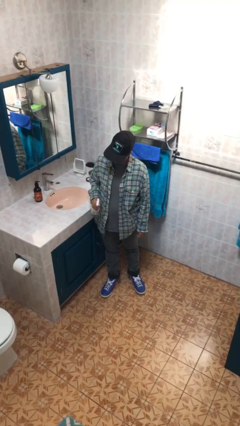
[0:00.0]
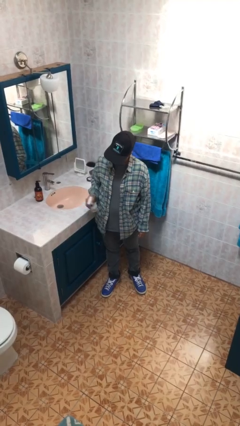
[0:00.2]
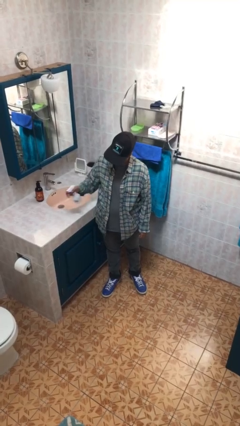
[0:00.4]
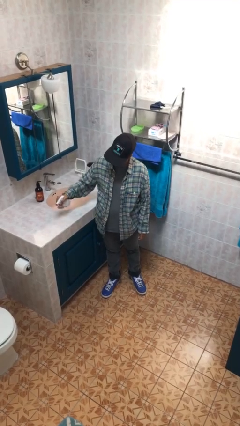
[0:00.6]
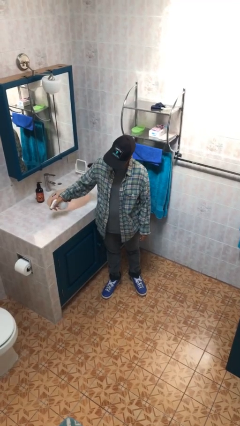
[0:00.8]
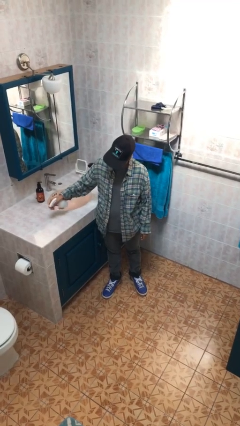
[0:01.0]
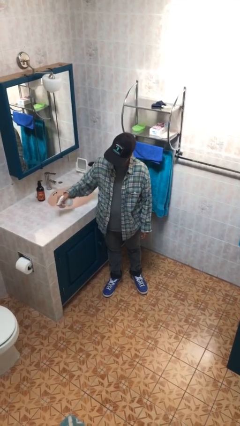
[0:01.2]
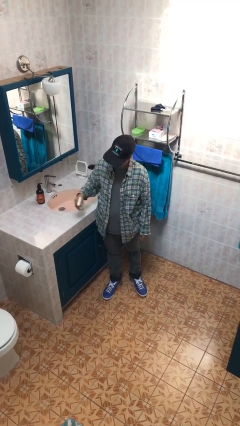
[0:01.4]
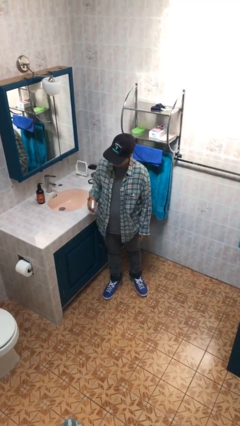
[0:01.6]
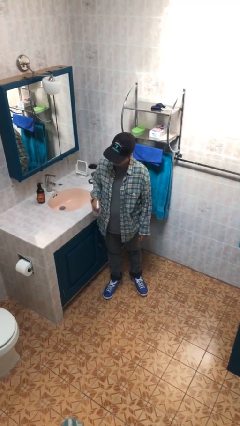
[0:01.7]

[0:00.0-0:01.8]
person sprays from bottle

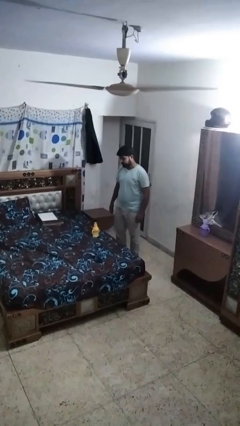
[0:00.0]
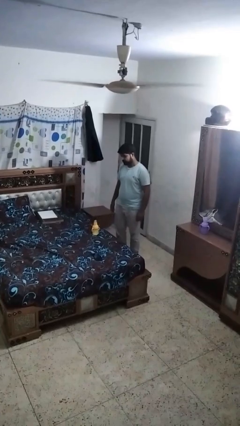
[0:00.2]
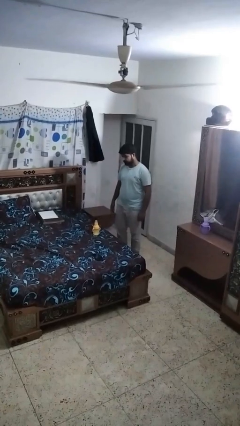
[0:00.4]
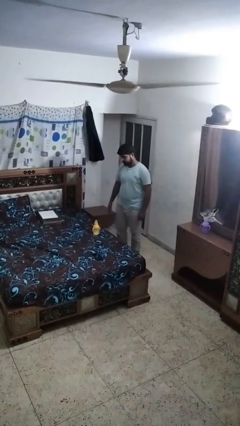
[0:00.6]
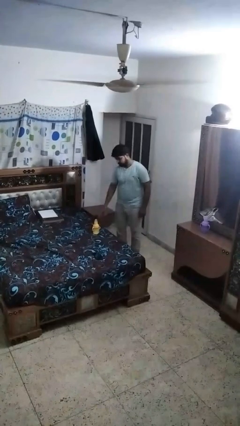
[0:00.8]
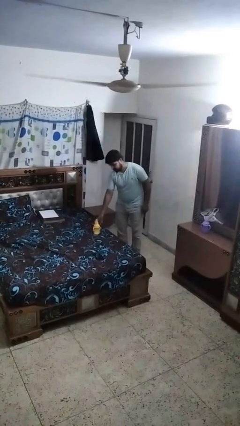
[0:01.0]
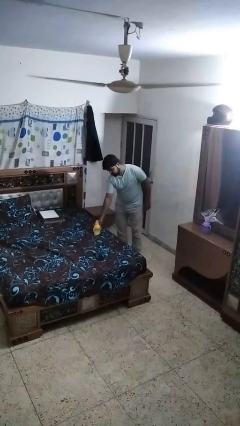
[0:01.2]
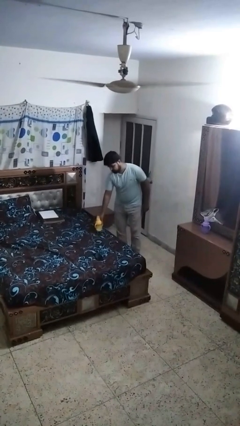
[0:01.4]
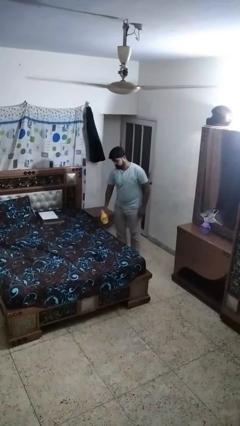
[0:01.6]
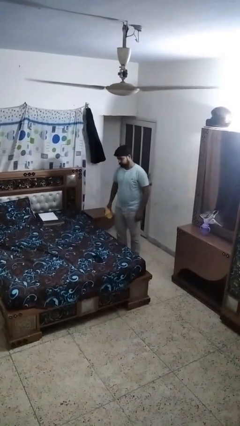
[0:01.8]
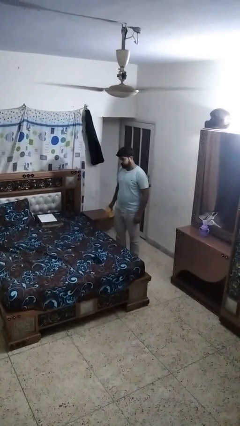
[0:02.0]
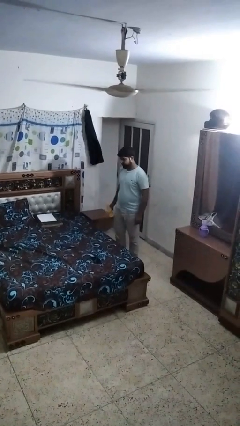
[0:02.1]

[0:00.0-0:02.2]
person picks up object from bed

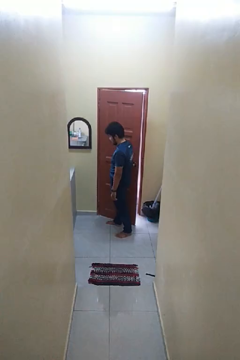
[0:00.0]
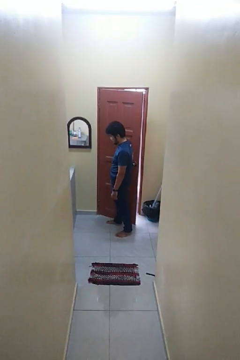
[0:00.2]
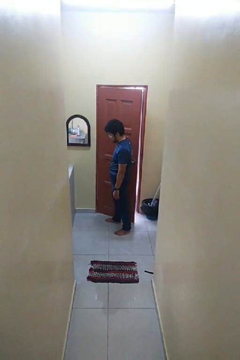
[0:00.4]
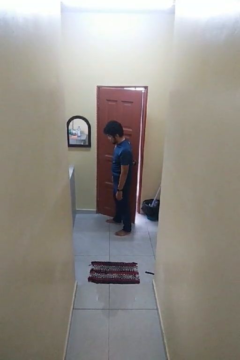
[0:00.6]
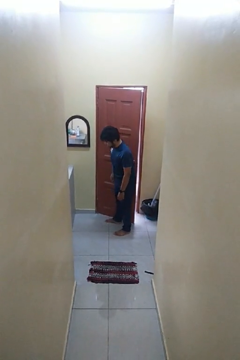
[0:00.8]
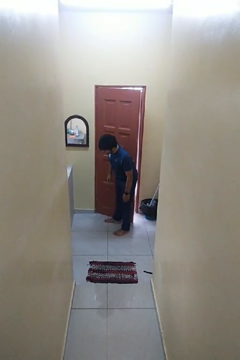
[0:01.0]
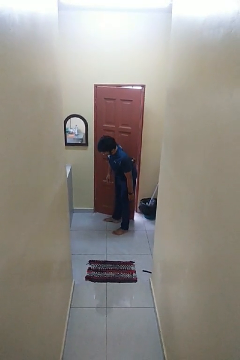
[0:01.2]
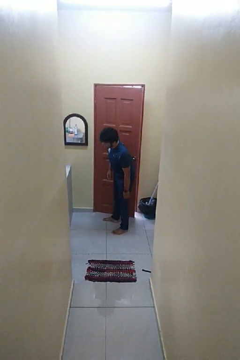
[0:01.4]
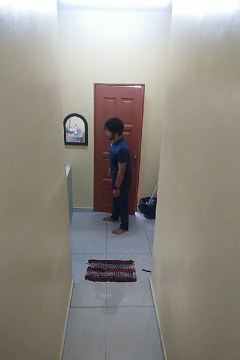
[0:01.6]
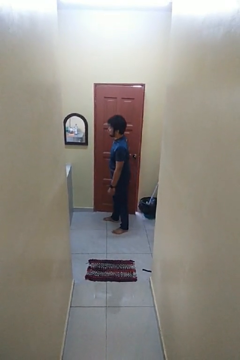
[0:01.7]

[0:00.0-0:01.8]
person closes door with hip

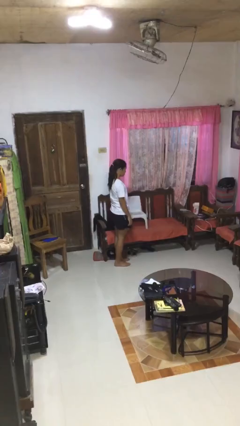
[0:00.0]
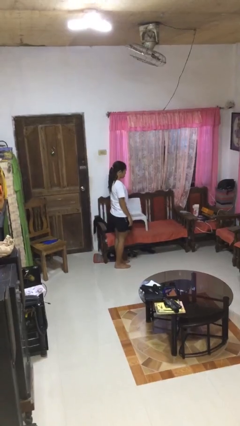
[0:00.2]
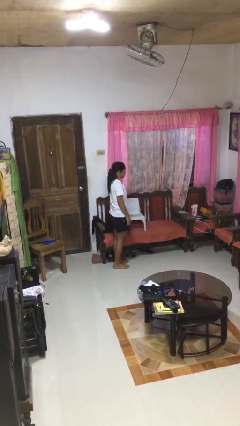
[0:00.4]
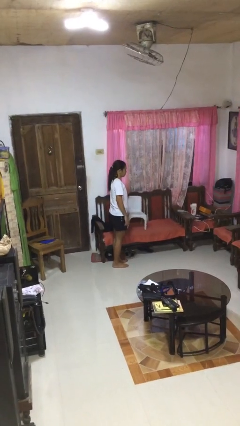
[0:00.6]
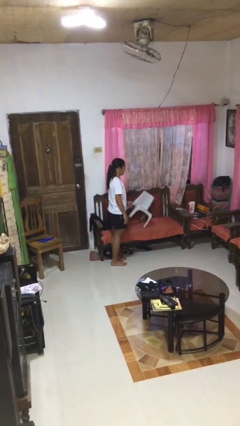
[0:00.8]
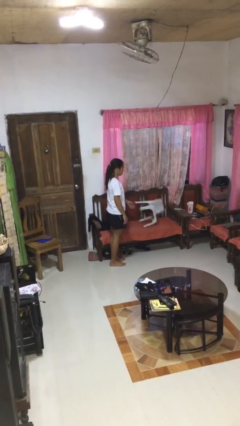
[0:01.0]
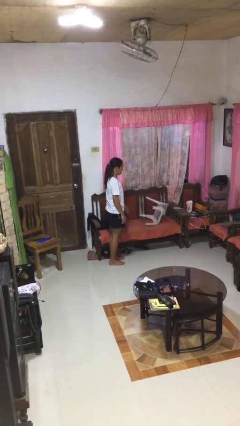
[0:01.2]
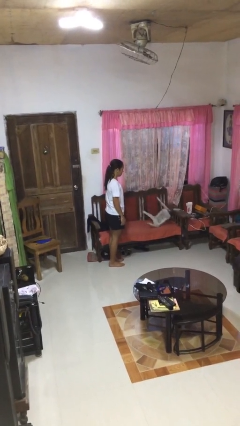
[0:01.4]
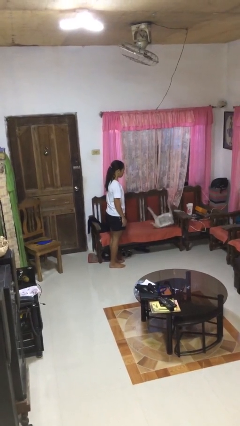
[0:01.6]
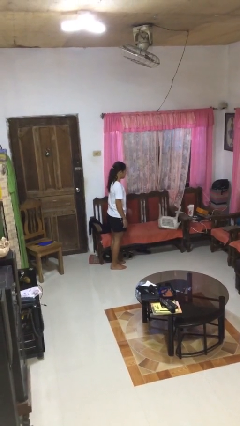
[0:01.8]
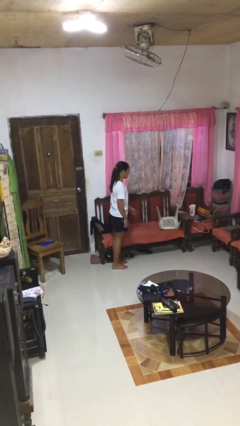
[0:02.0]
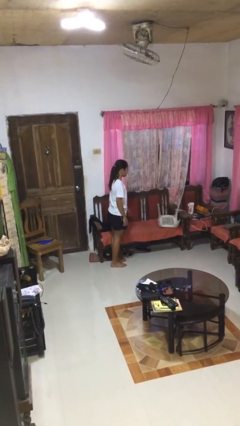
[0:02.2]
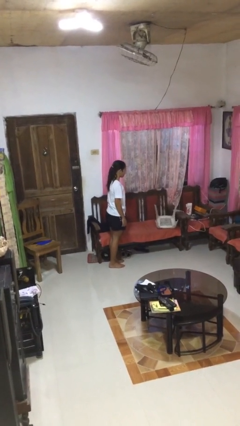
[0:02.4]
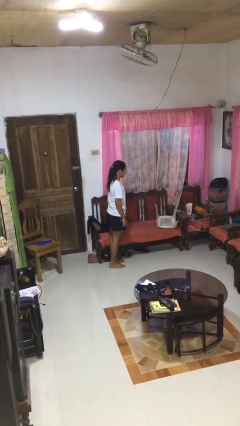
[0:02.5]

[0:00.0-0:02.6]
person knocks over furniture

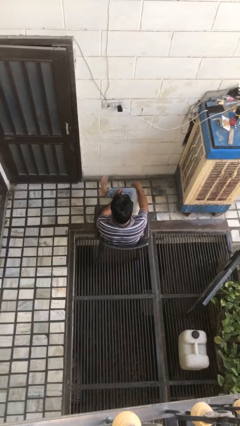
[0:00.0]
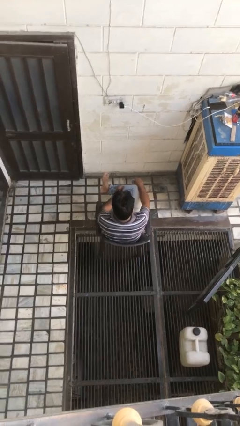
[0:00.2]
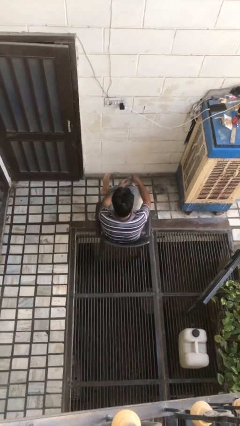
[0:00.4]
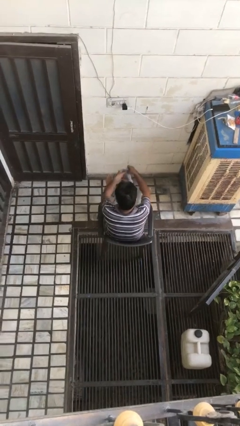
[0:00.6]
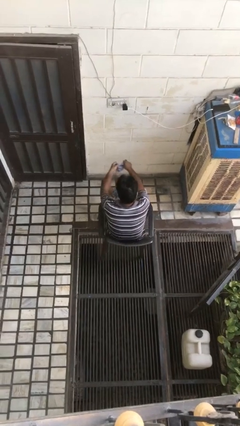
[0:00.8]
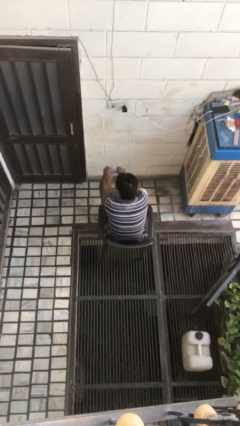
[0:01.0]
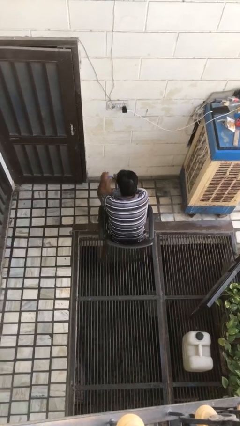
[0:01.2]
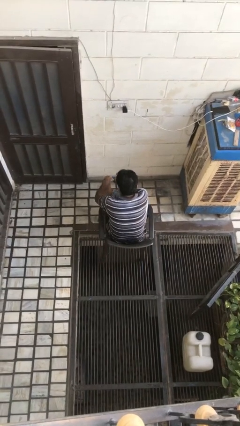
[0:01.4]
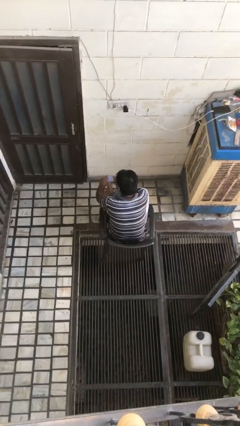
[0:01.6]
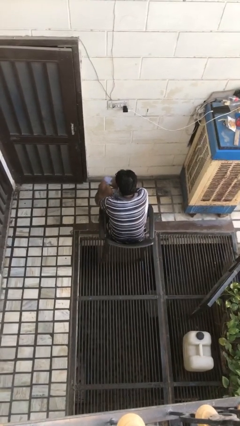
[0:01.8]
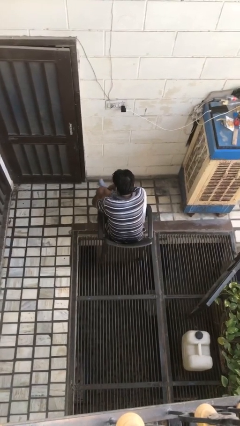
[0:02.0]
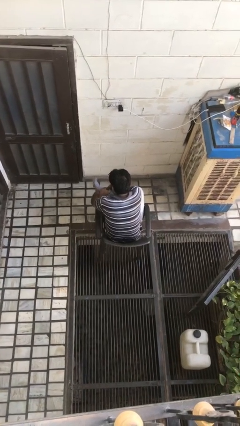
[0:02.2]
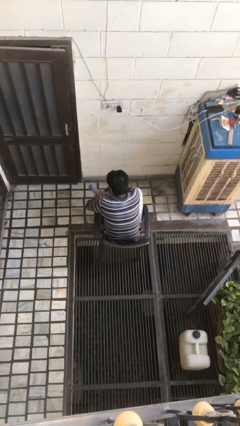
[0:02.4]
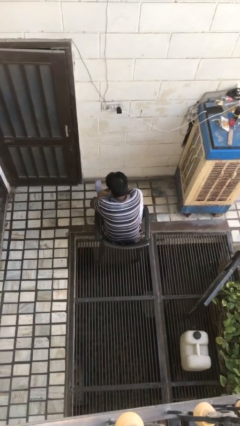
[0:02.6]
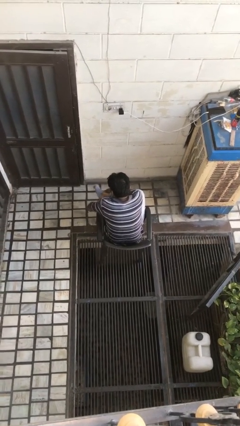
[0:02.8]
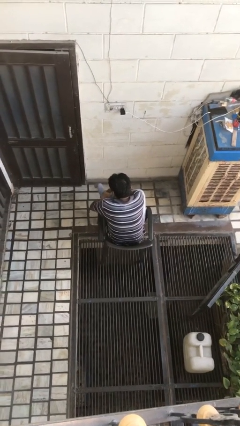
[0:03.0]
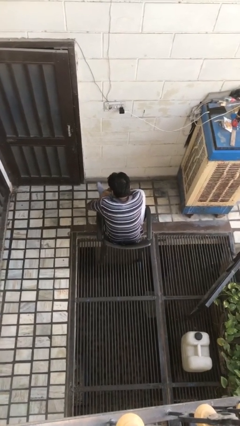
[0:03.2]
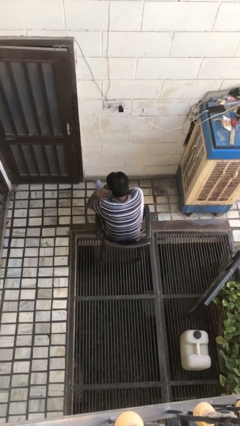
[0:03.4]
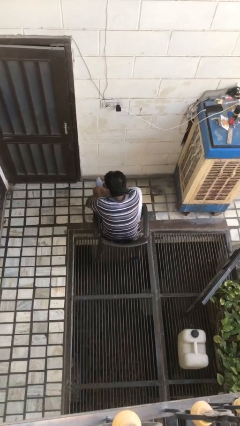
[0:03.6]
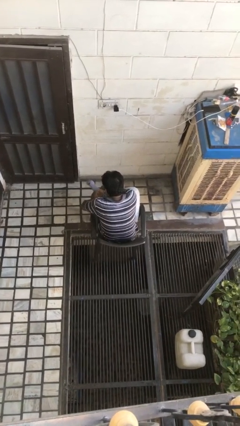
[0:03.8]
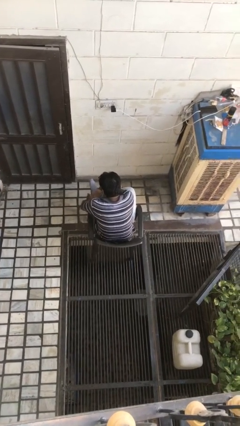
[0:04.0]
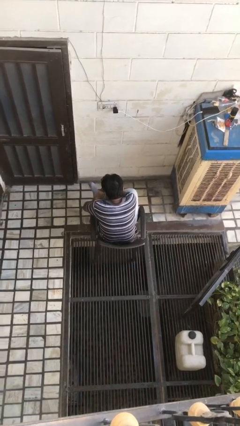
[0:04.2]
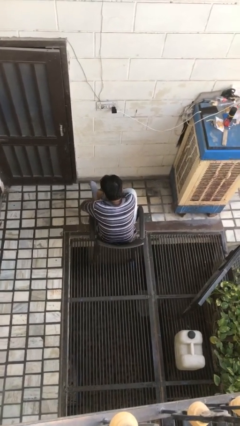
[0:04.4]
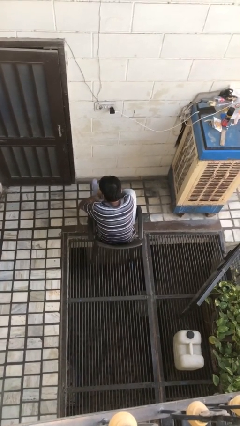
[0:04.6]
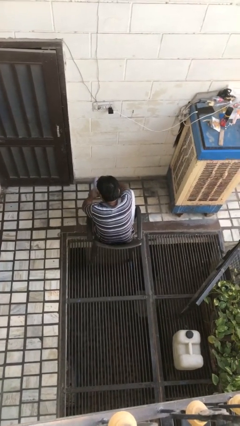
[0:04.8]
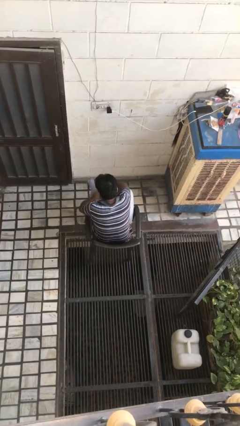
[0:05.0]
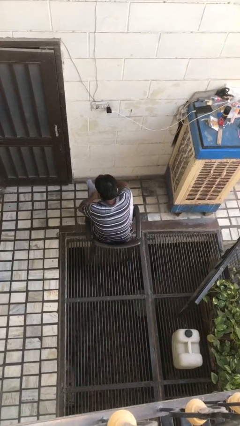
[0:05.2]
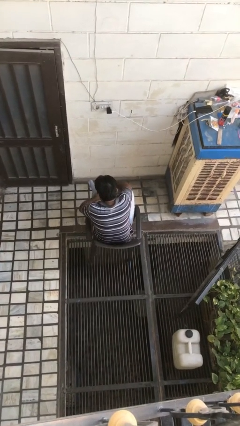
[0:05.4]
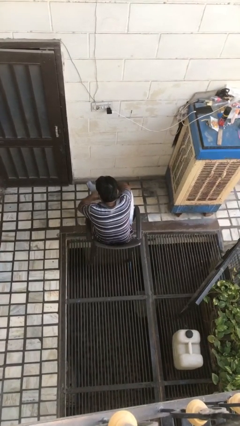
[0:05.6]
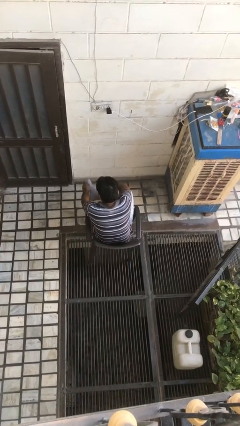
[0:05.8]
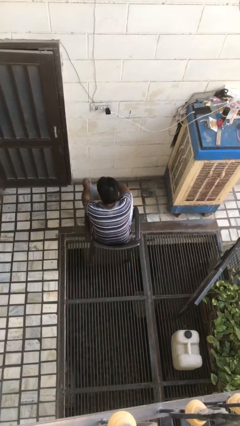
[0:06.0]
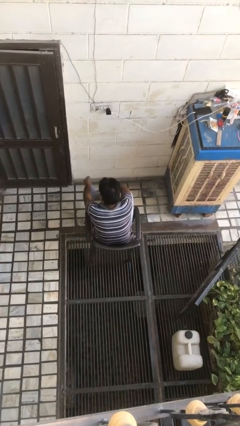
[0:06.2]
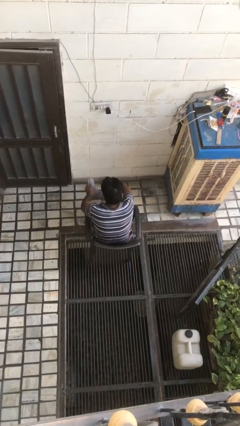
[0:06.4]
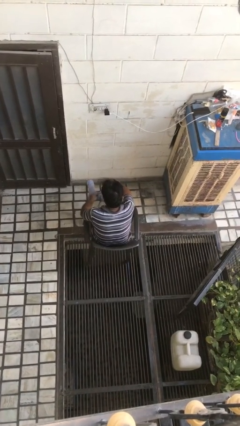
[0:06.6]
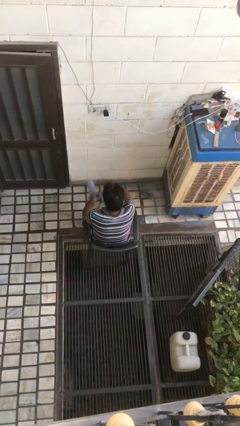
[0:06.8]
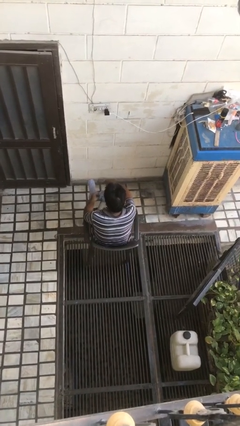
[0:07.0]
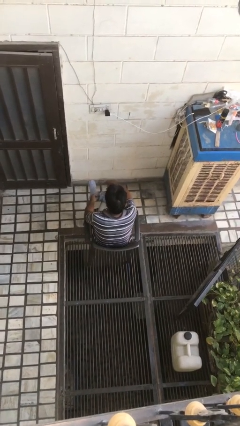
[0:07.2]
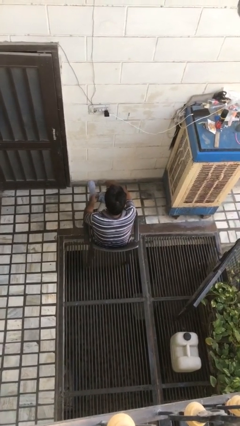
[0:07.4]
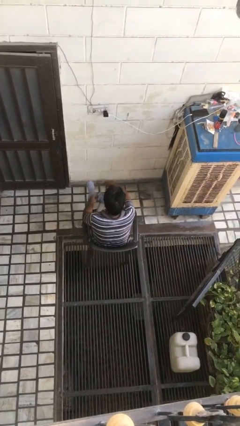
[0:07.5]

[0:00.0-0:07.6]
person puts on socks

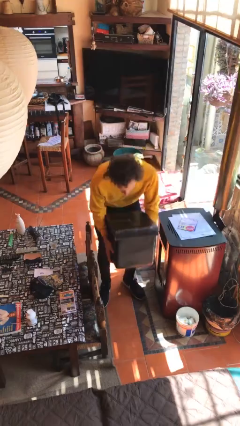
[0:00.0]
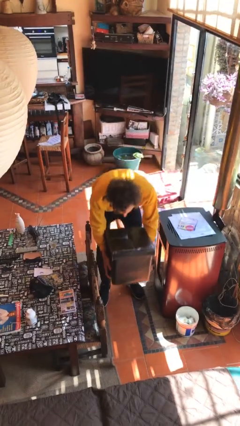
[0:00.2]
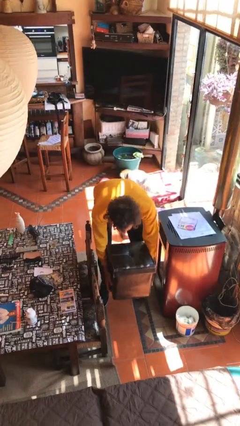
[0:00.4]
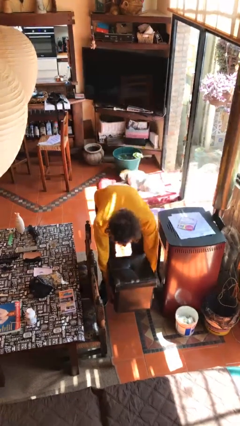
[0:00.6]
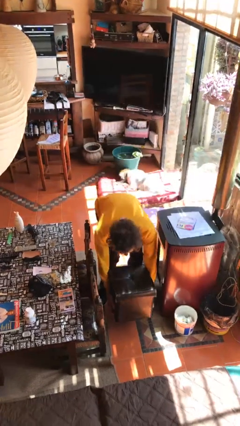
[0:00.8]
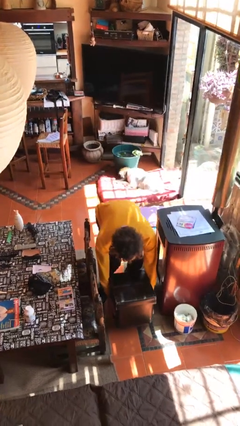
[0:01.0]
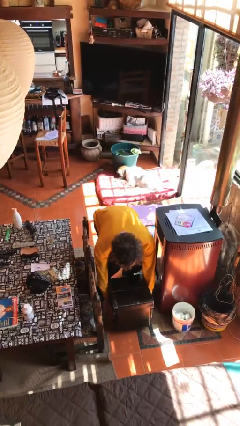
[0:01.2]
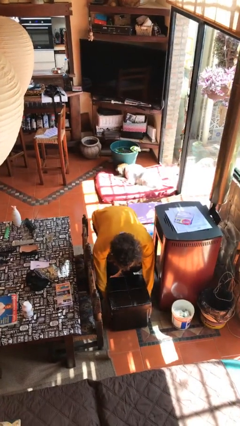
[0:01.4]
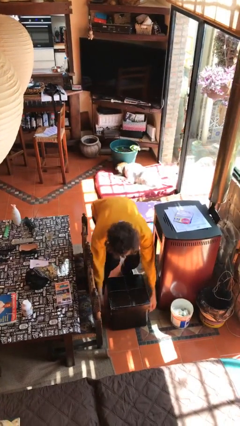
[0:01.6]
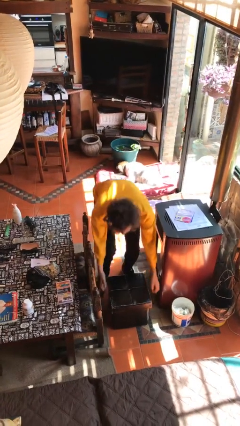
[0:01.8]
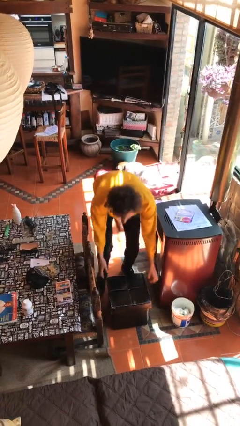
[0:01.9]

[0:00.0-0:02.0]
person puts down object on floor
